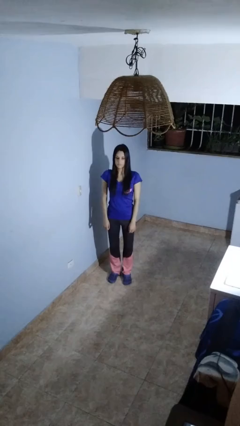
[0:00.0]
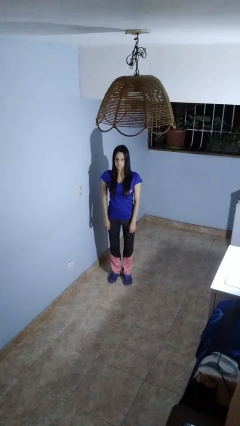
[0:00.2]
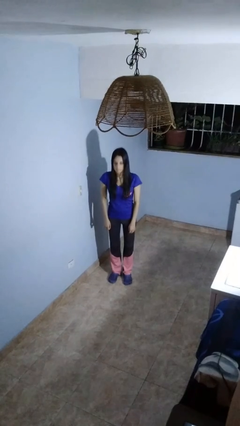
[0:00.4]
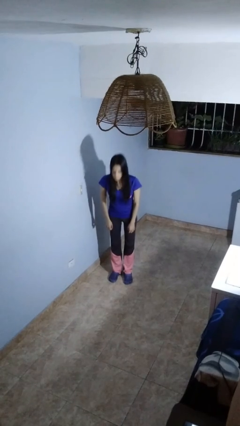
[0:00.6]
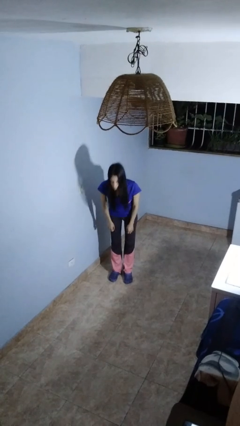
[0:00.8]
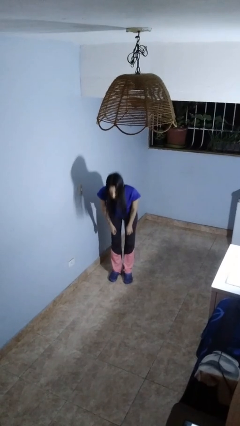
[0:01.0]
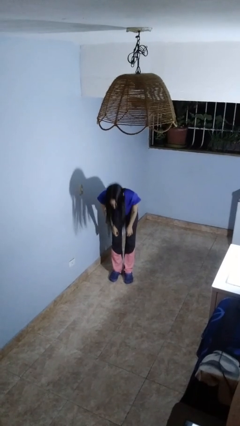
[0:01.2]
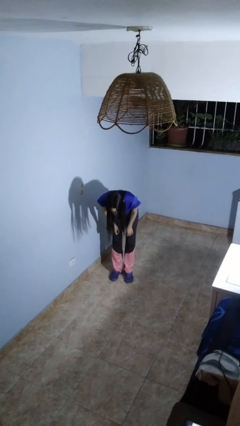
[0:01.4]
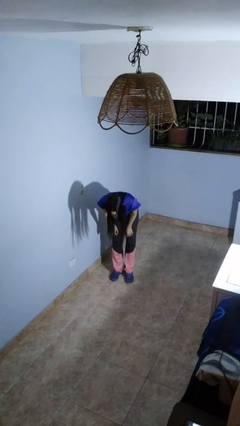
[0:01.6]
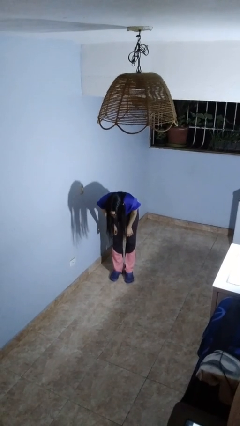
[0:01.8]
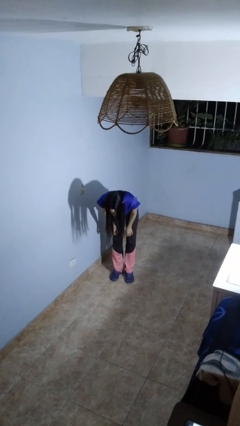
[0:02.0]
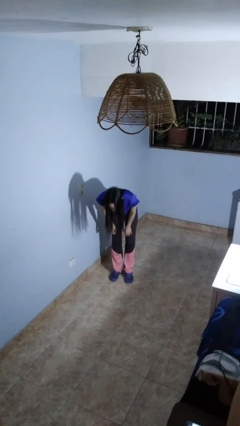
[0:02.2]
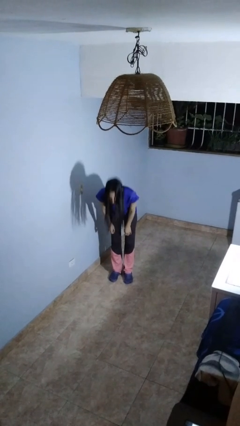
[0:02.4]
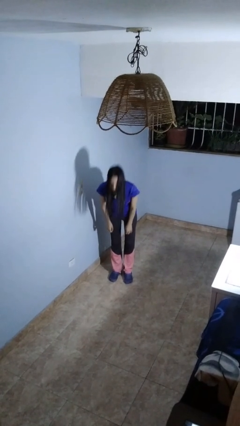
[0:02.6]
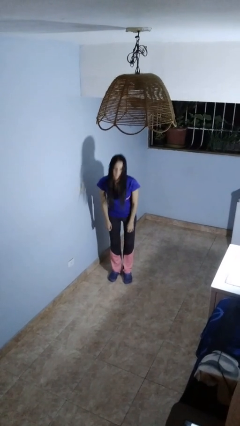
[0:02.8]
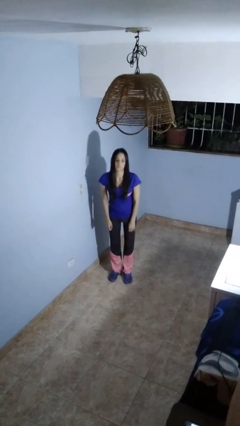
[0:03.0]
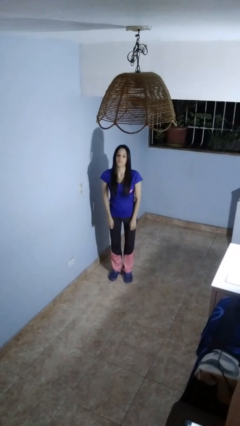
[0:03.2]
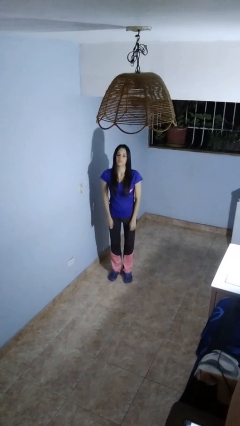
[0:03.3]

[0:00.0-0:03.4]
person bows

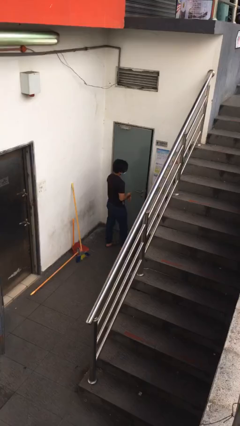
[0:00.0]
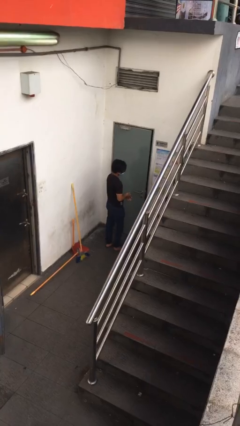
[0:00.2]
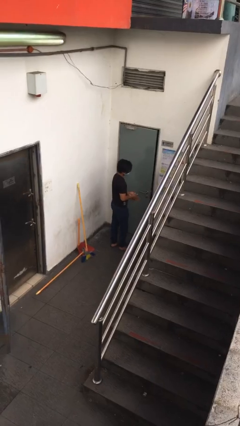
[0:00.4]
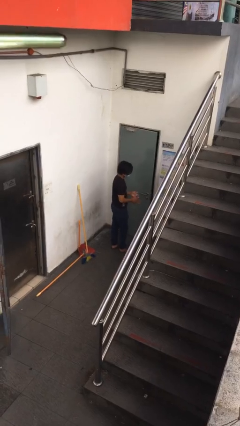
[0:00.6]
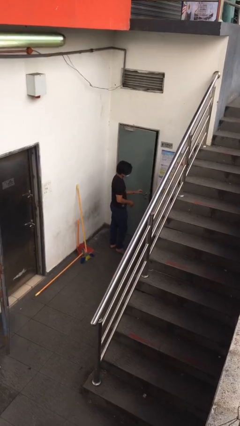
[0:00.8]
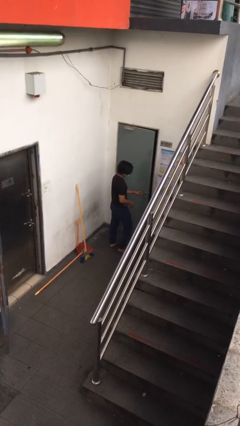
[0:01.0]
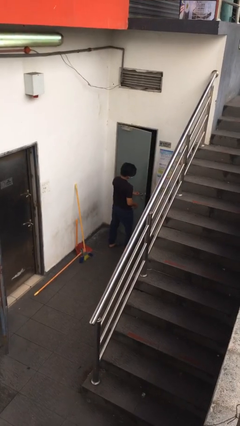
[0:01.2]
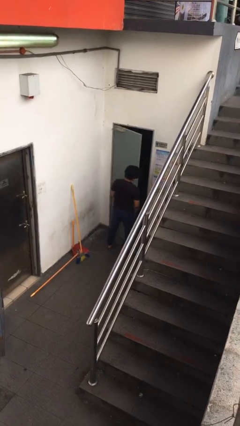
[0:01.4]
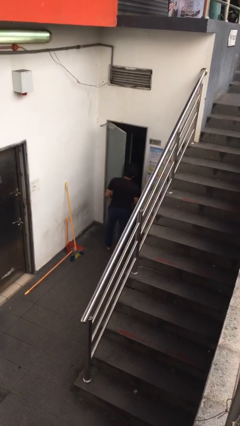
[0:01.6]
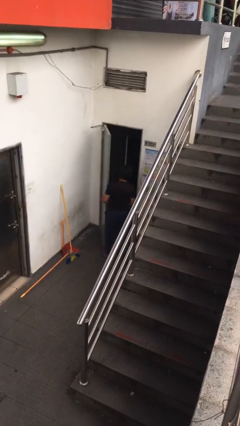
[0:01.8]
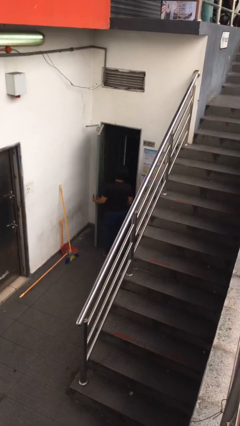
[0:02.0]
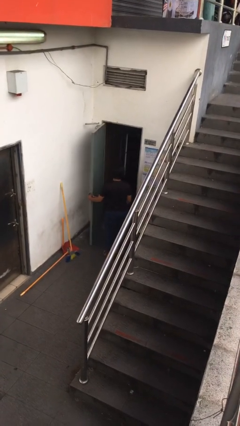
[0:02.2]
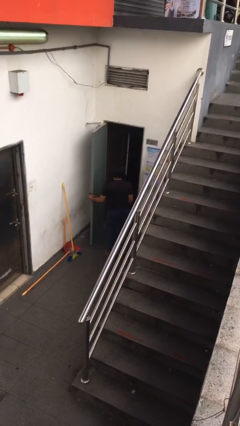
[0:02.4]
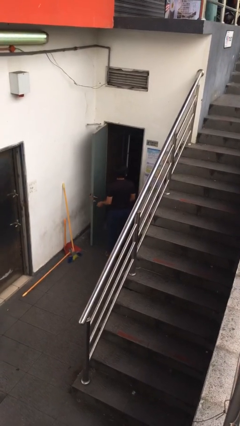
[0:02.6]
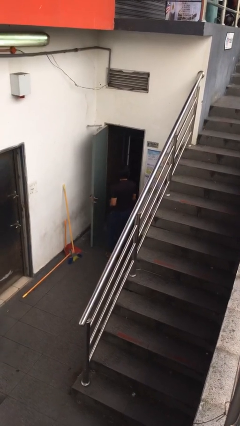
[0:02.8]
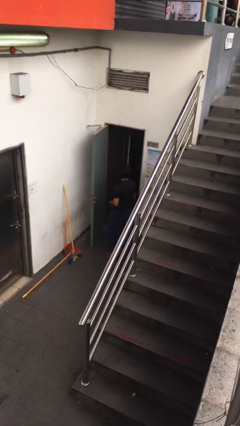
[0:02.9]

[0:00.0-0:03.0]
person opens facility door

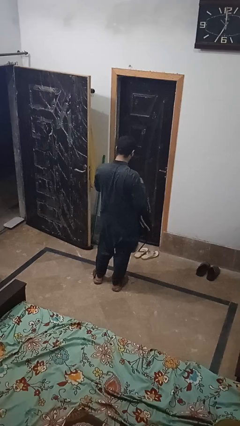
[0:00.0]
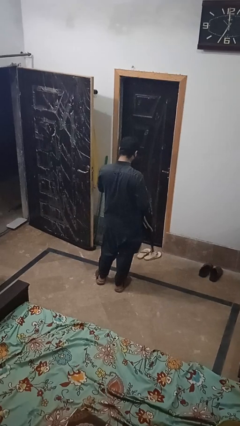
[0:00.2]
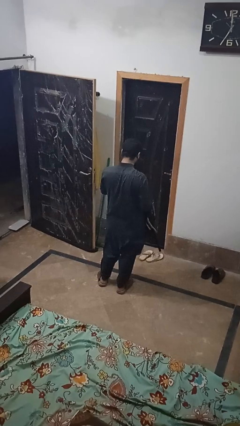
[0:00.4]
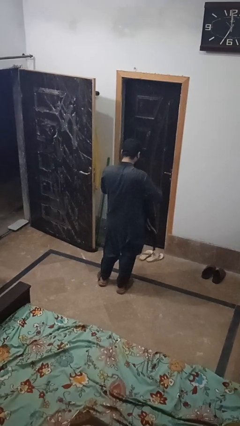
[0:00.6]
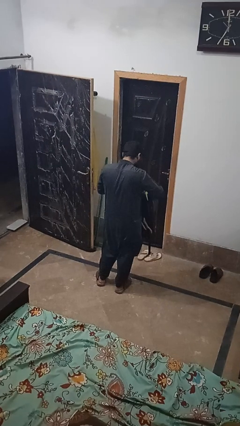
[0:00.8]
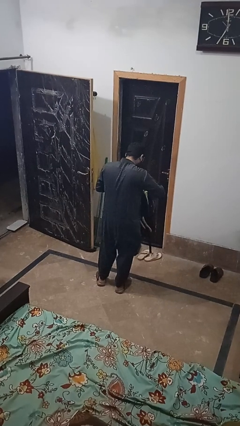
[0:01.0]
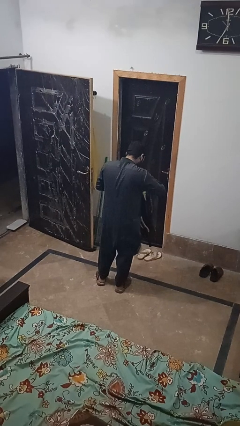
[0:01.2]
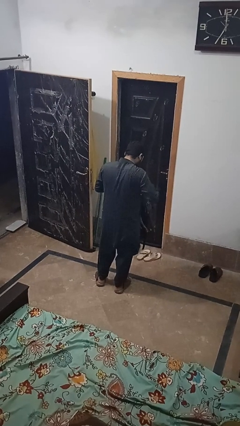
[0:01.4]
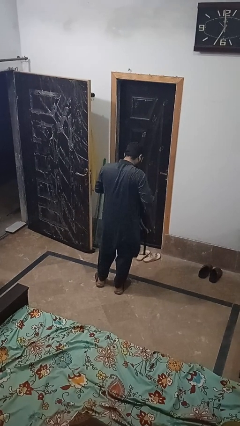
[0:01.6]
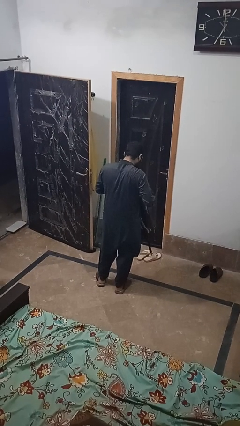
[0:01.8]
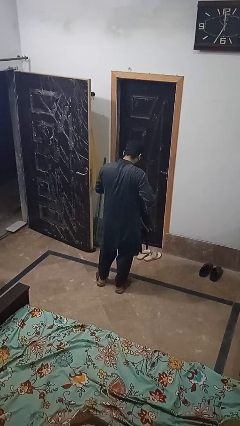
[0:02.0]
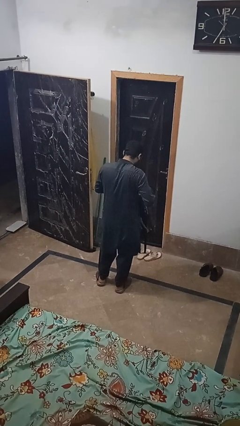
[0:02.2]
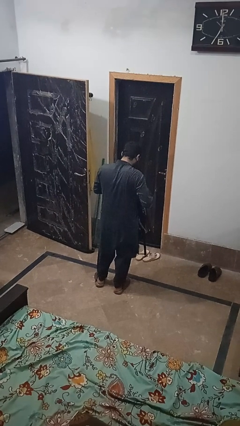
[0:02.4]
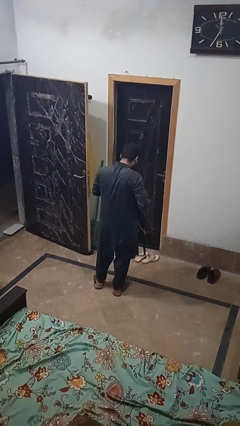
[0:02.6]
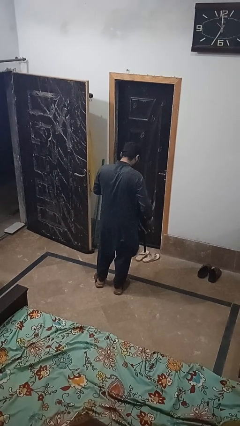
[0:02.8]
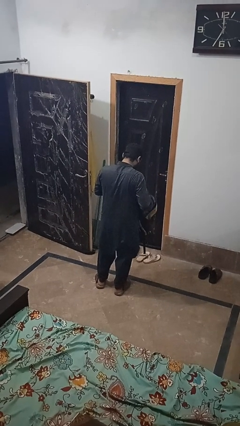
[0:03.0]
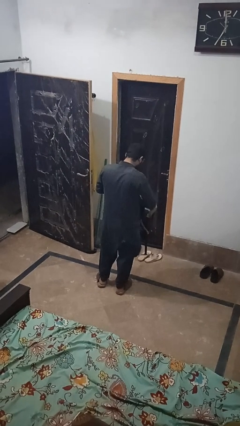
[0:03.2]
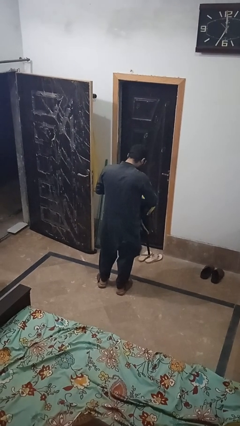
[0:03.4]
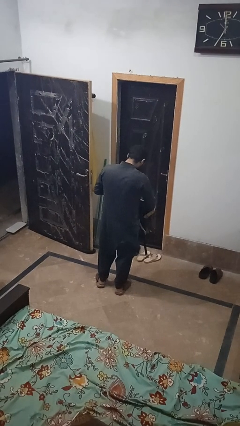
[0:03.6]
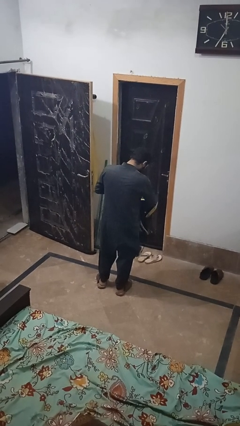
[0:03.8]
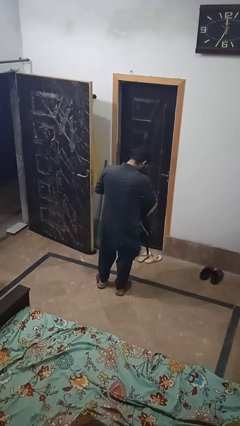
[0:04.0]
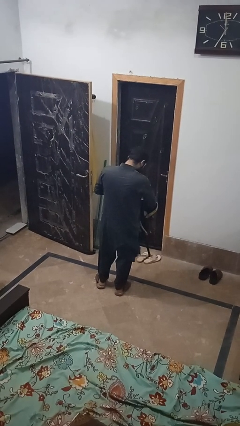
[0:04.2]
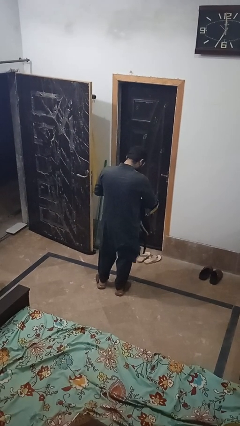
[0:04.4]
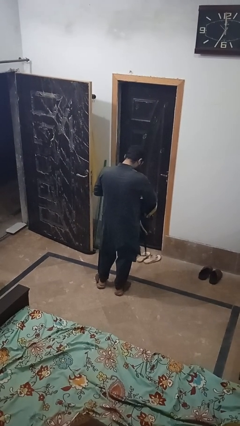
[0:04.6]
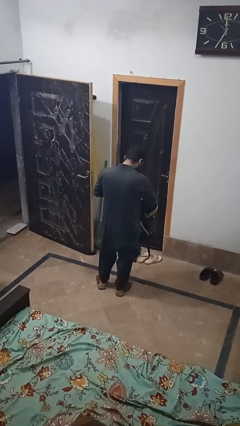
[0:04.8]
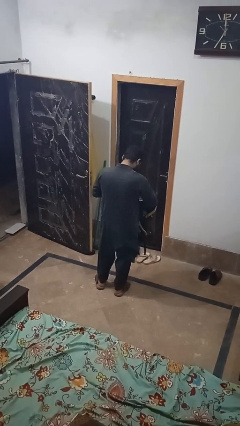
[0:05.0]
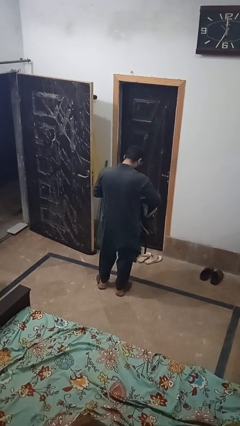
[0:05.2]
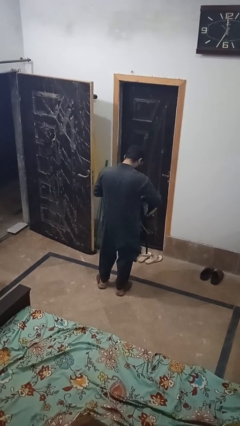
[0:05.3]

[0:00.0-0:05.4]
person searches in bag

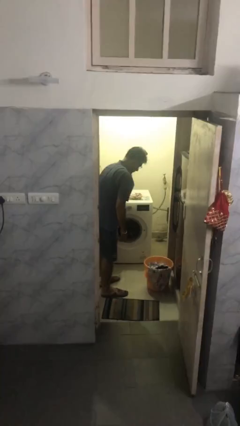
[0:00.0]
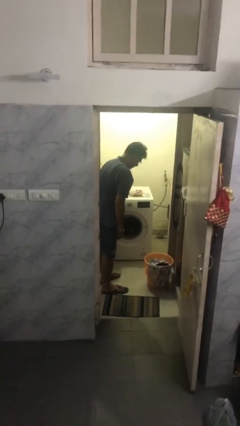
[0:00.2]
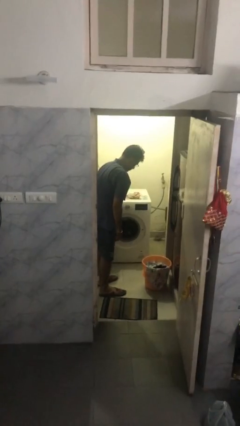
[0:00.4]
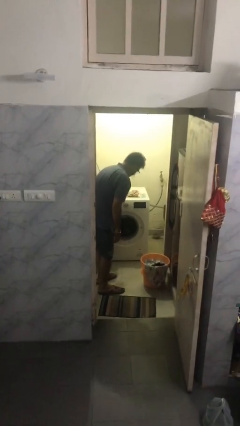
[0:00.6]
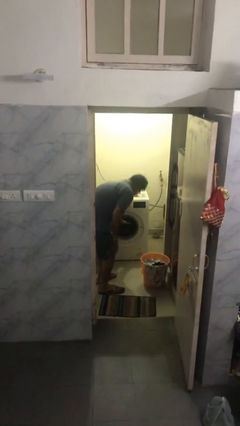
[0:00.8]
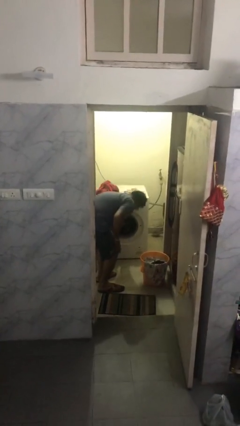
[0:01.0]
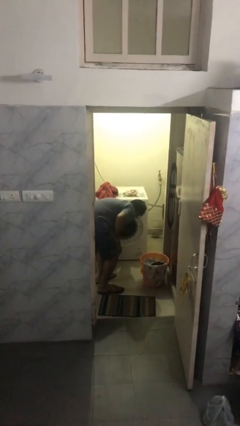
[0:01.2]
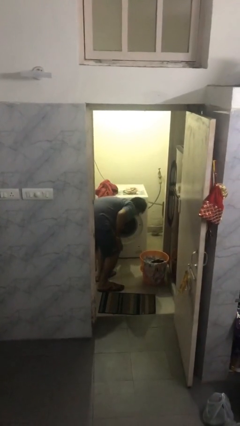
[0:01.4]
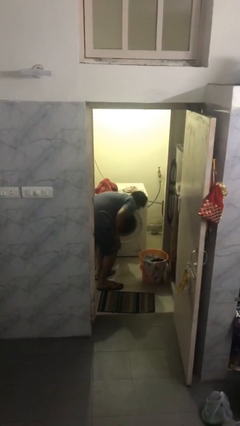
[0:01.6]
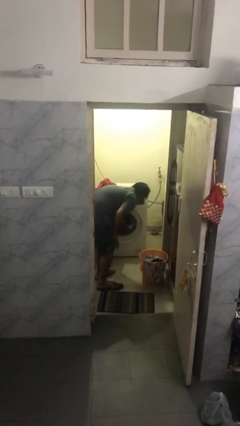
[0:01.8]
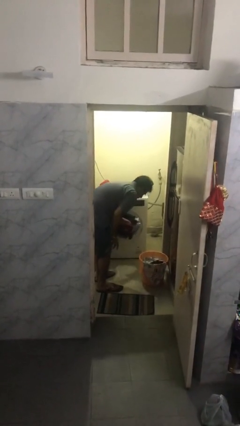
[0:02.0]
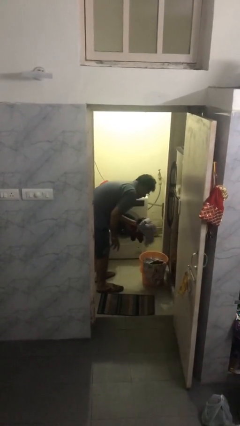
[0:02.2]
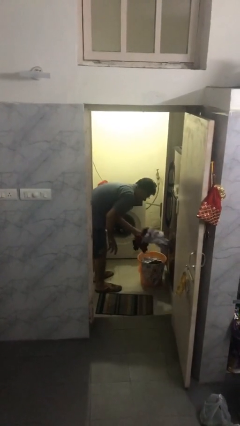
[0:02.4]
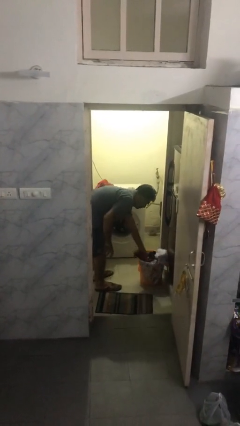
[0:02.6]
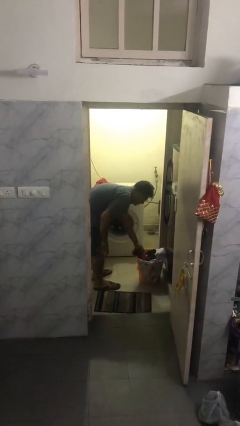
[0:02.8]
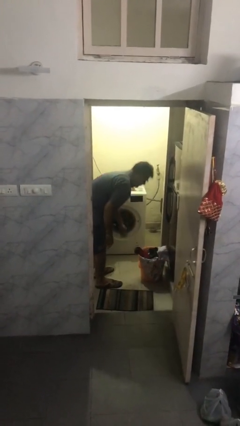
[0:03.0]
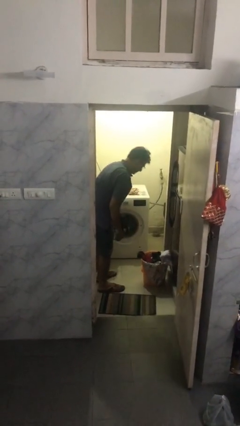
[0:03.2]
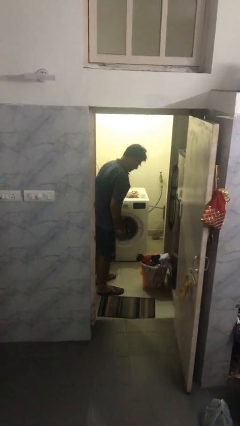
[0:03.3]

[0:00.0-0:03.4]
person unloads clotheswasher

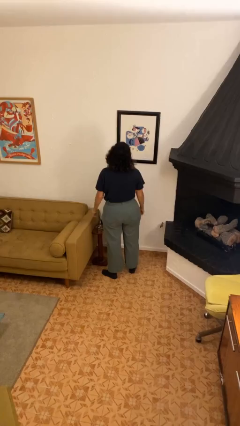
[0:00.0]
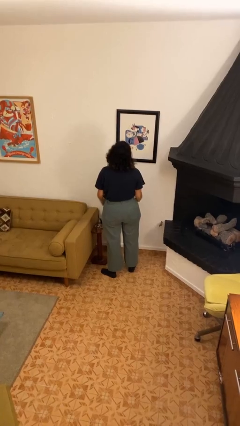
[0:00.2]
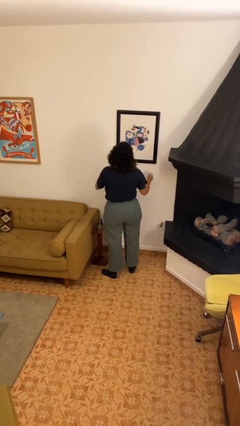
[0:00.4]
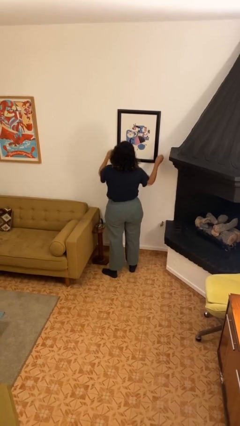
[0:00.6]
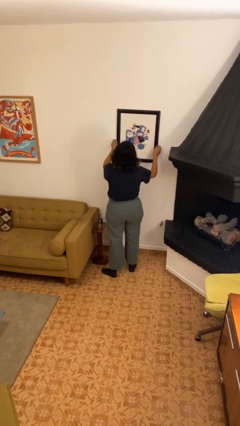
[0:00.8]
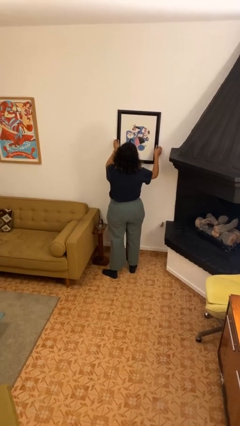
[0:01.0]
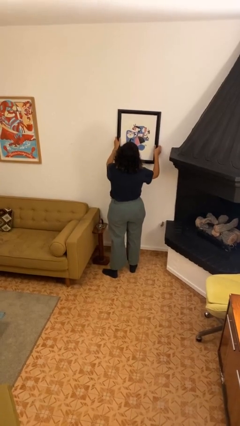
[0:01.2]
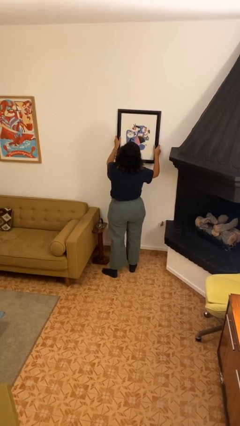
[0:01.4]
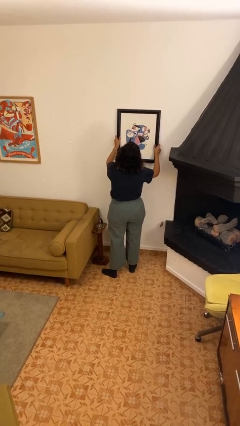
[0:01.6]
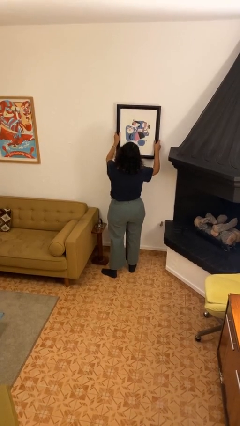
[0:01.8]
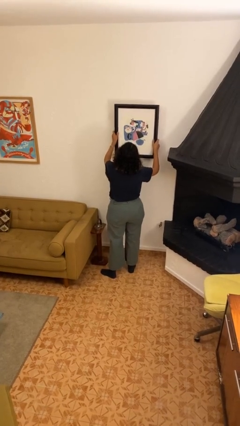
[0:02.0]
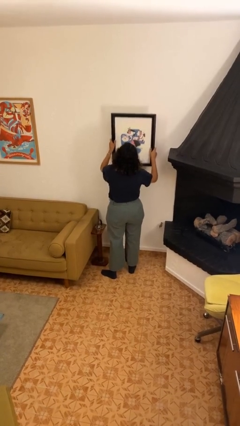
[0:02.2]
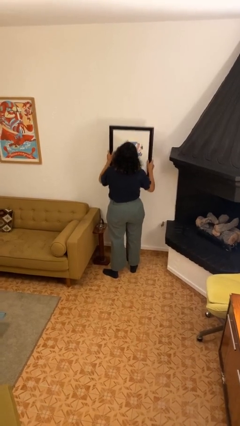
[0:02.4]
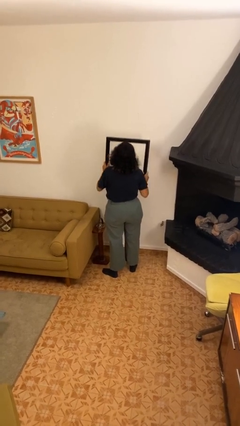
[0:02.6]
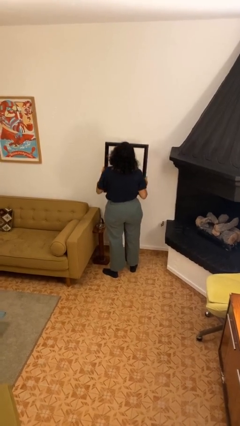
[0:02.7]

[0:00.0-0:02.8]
person takes down picture frame
